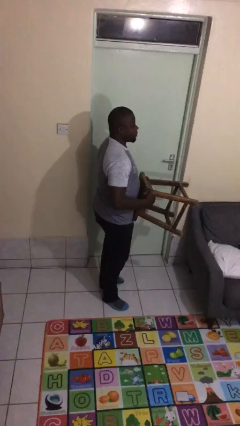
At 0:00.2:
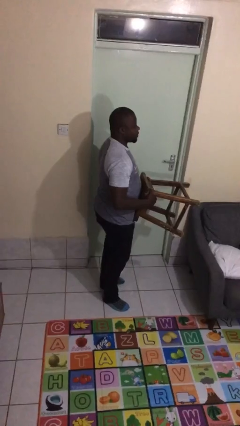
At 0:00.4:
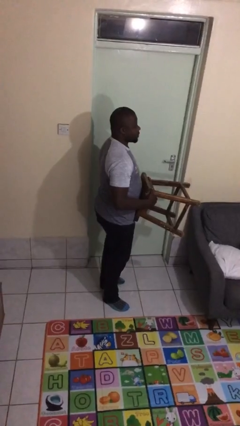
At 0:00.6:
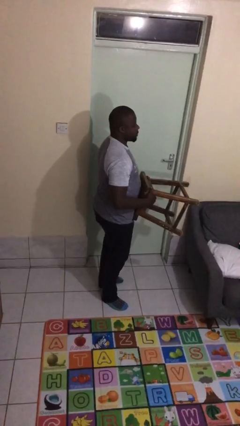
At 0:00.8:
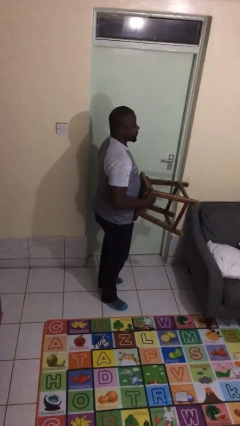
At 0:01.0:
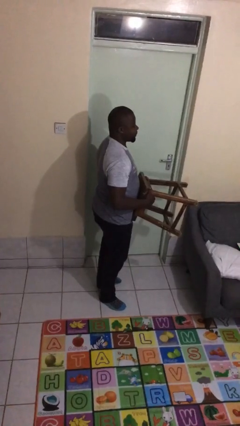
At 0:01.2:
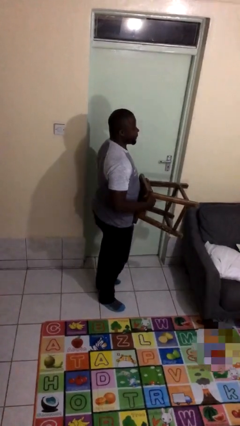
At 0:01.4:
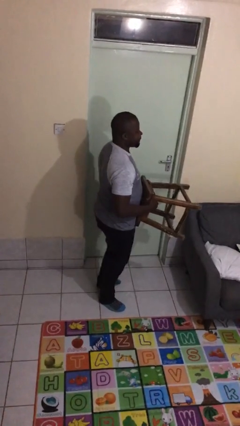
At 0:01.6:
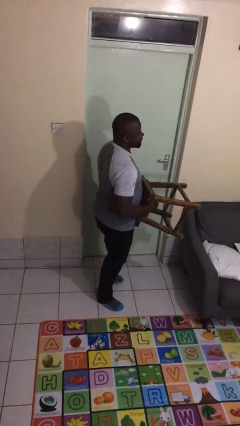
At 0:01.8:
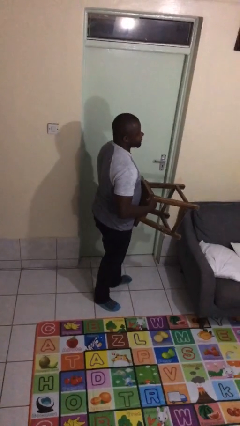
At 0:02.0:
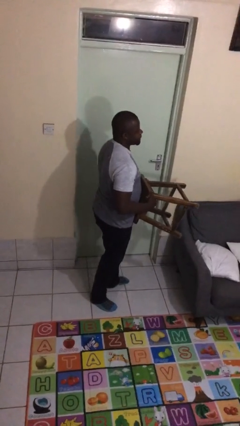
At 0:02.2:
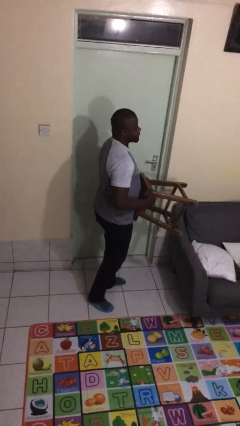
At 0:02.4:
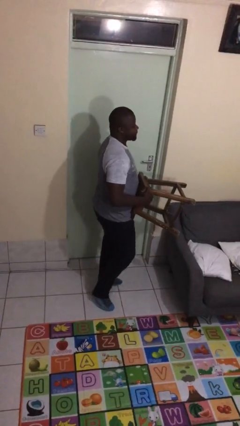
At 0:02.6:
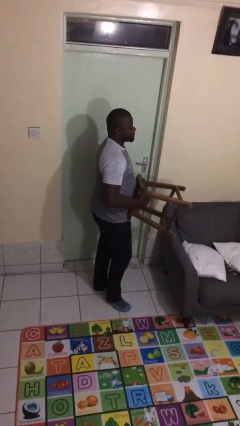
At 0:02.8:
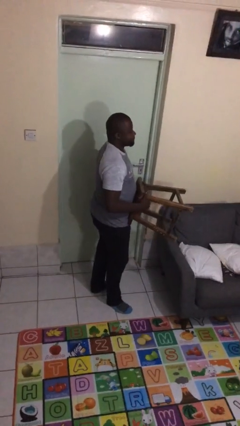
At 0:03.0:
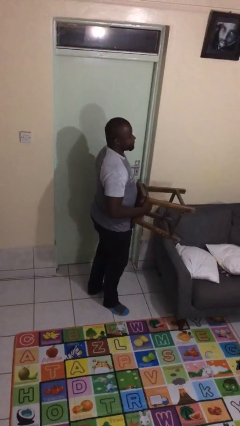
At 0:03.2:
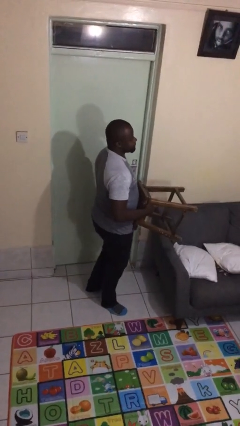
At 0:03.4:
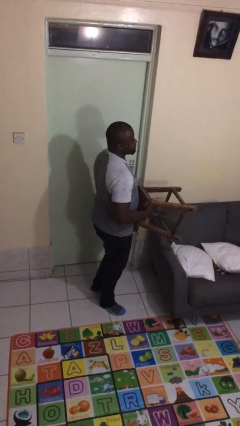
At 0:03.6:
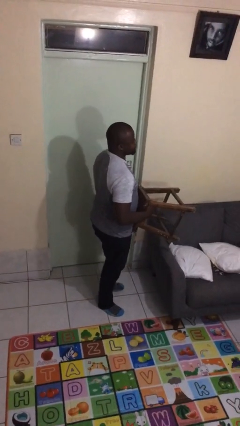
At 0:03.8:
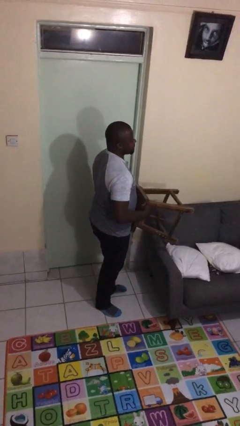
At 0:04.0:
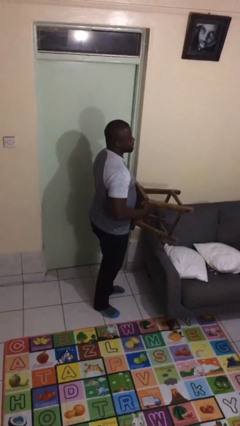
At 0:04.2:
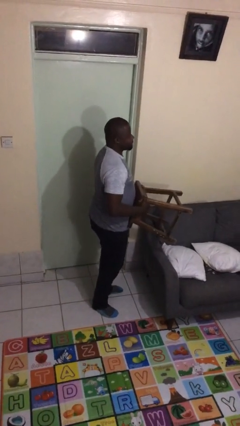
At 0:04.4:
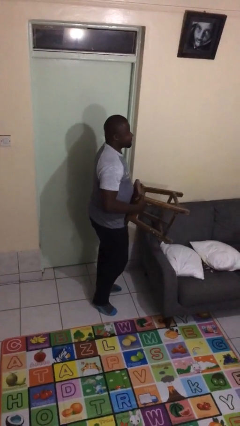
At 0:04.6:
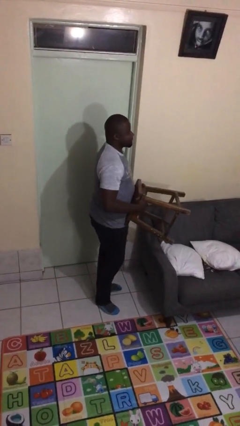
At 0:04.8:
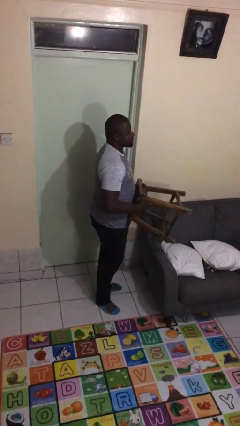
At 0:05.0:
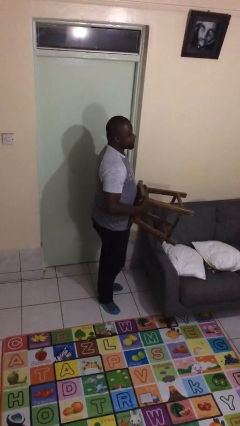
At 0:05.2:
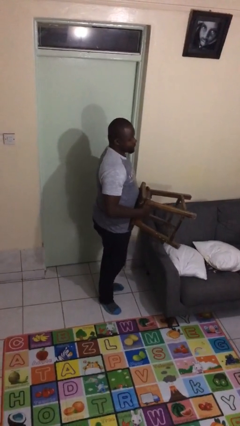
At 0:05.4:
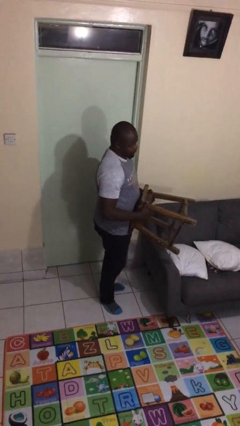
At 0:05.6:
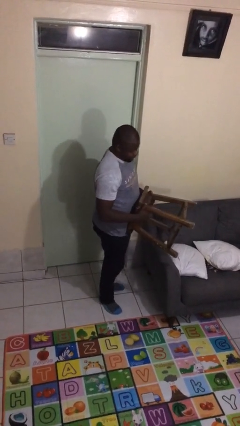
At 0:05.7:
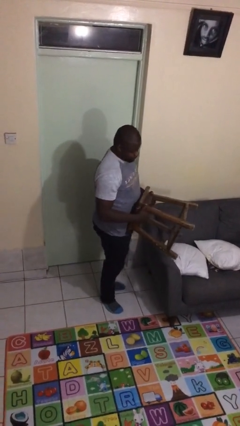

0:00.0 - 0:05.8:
person carries furniture

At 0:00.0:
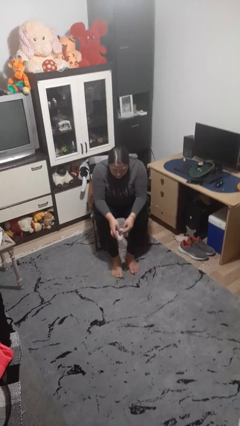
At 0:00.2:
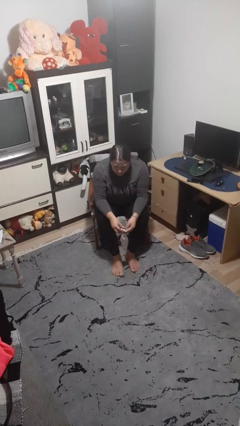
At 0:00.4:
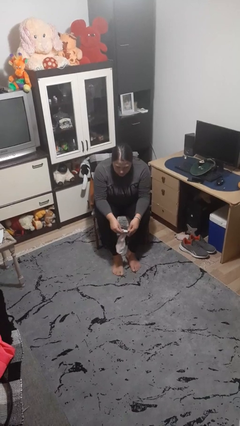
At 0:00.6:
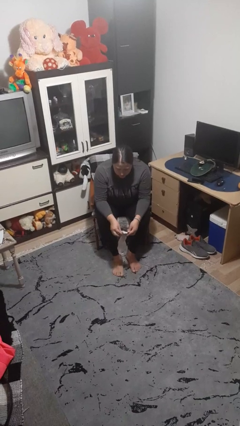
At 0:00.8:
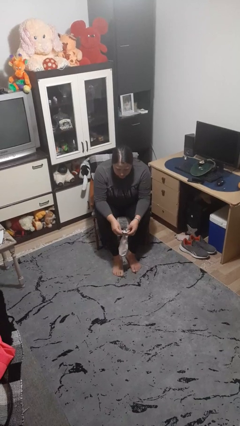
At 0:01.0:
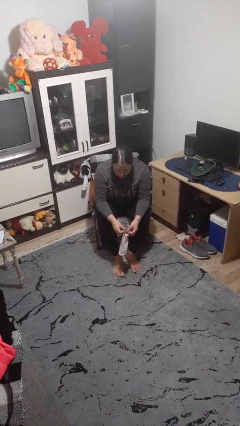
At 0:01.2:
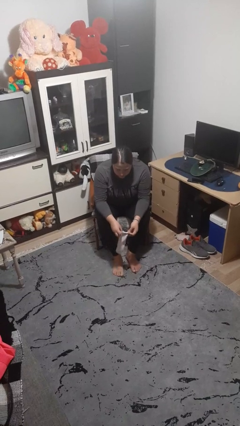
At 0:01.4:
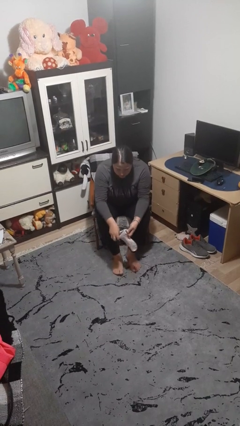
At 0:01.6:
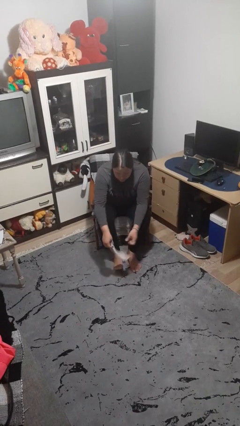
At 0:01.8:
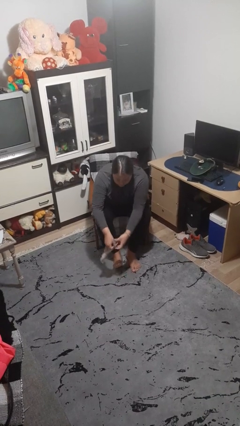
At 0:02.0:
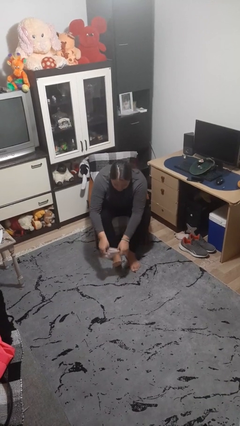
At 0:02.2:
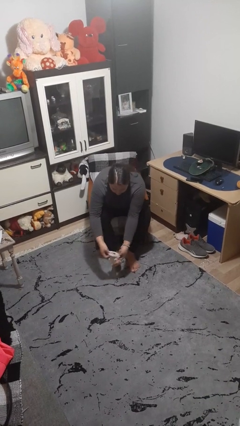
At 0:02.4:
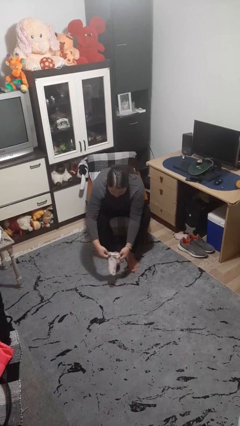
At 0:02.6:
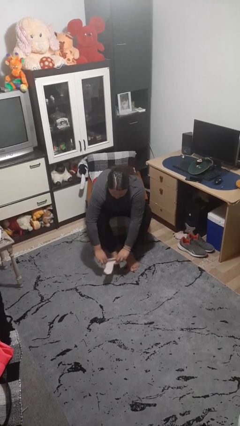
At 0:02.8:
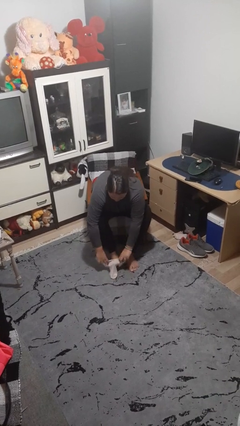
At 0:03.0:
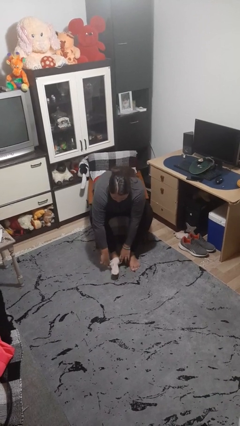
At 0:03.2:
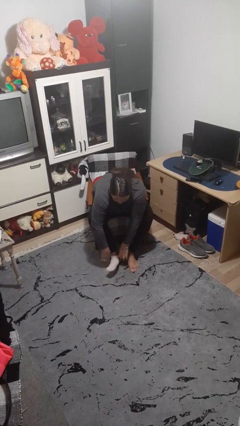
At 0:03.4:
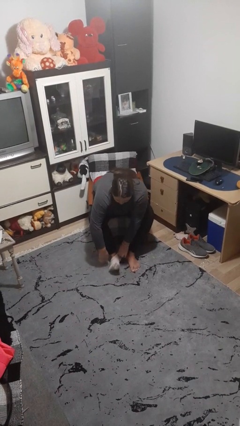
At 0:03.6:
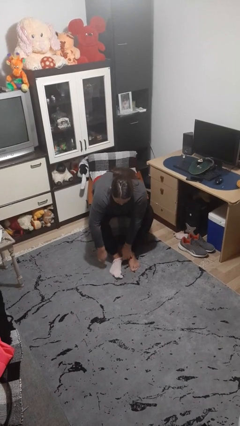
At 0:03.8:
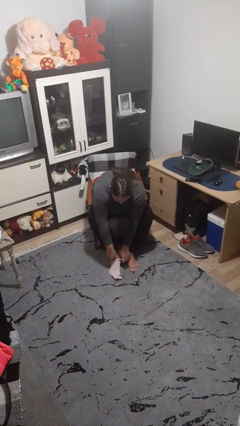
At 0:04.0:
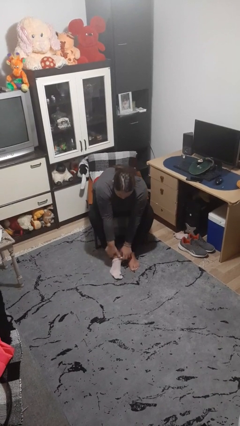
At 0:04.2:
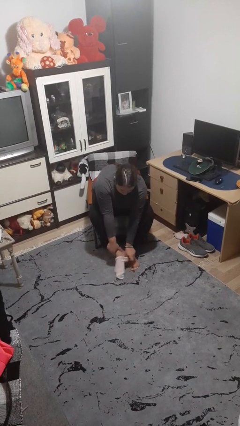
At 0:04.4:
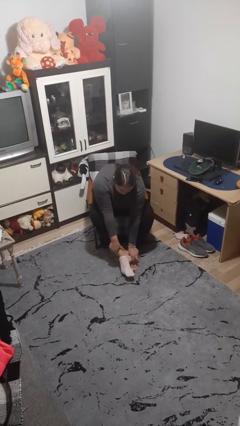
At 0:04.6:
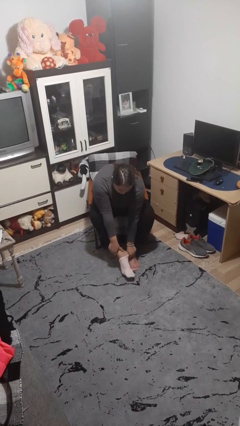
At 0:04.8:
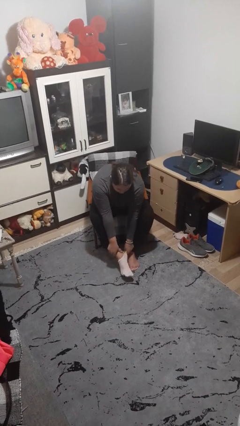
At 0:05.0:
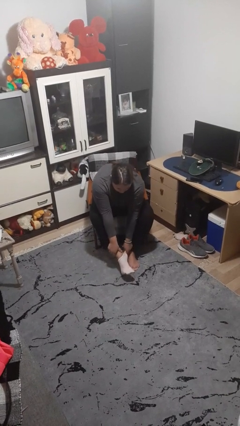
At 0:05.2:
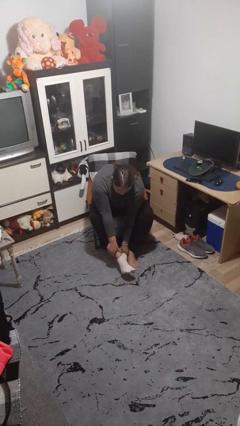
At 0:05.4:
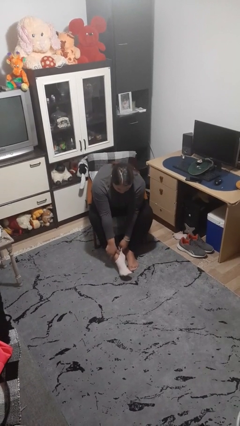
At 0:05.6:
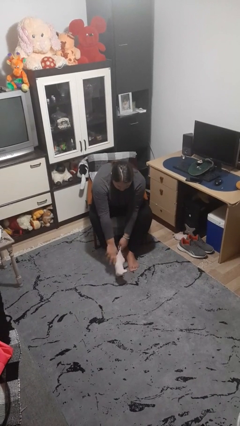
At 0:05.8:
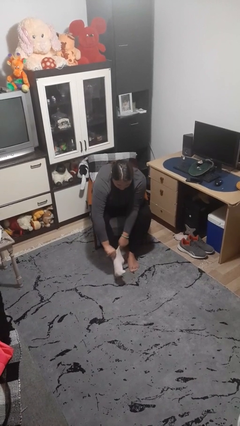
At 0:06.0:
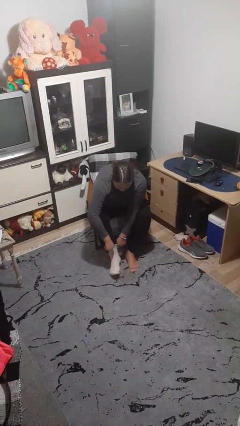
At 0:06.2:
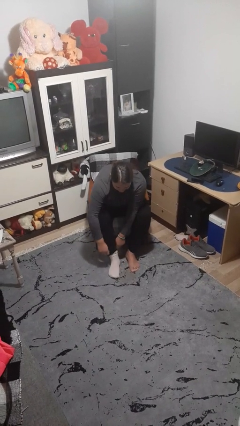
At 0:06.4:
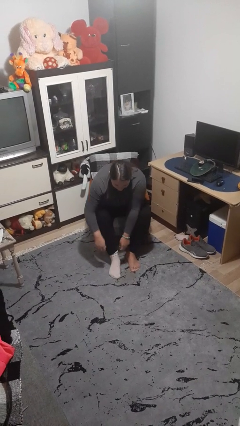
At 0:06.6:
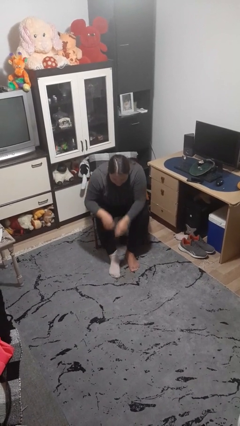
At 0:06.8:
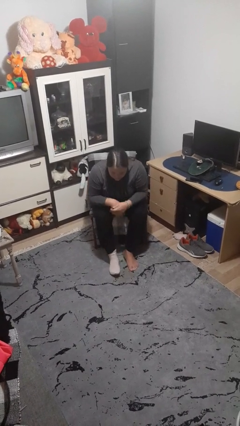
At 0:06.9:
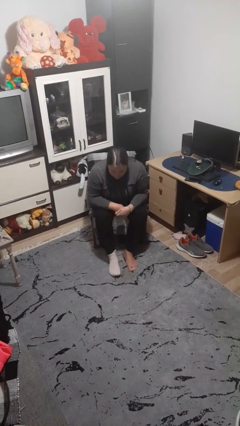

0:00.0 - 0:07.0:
person puts on socks

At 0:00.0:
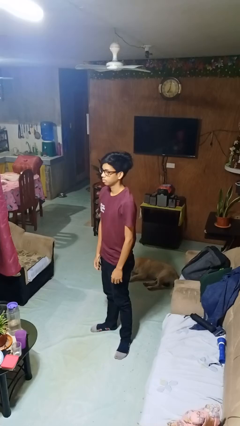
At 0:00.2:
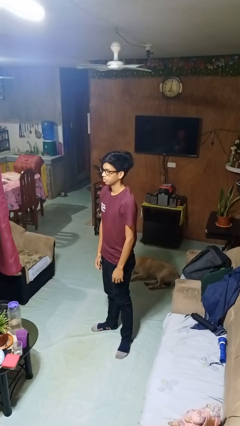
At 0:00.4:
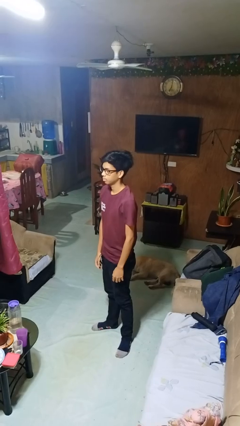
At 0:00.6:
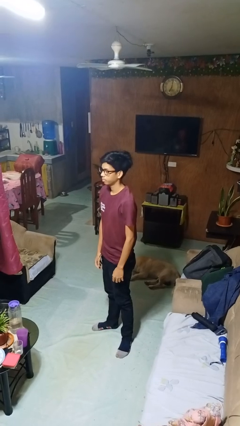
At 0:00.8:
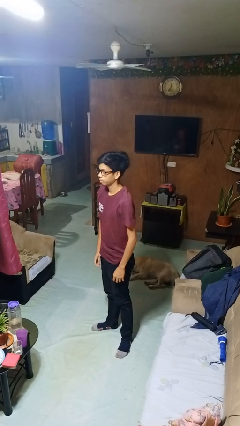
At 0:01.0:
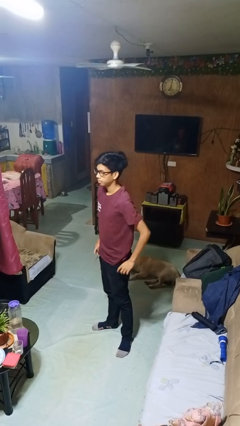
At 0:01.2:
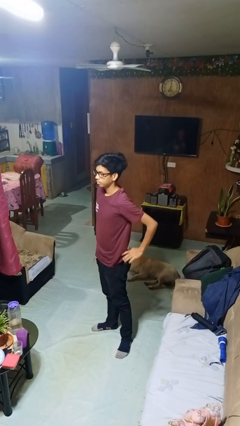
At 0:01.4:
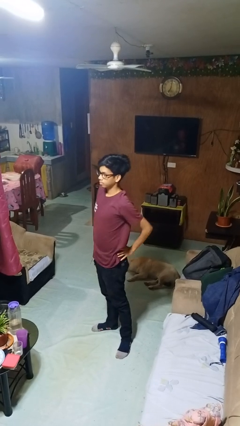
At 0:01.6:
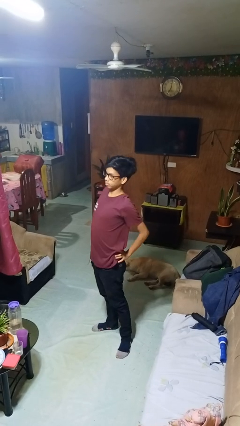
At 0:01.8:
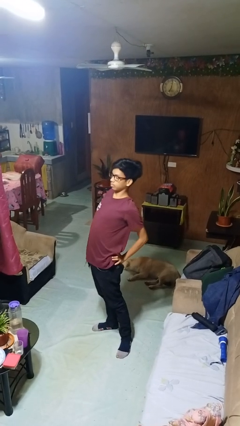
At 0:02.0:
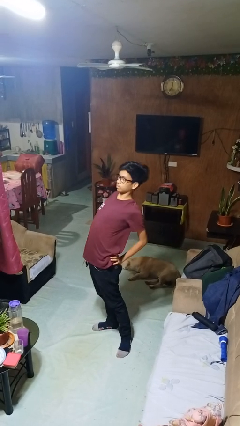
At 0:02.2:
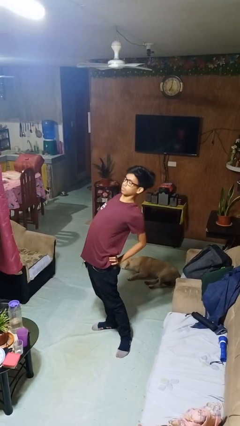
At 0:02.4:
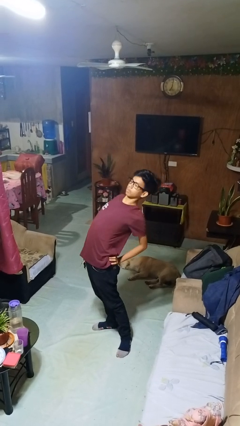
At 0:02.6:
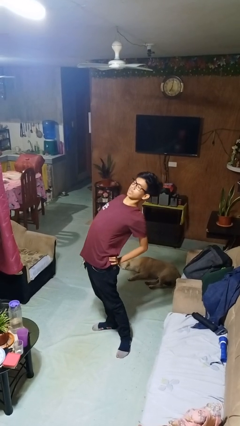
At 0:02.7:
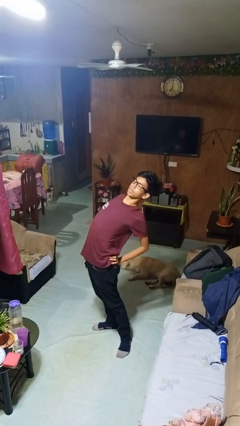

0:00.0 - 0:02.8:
person stretches back

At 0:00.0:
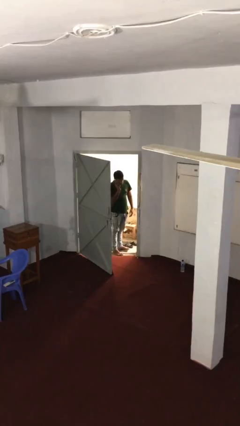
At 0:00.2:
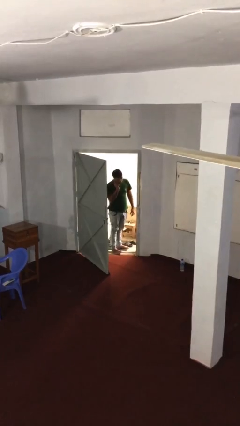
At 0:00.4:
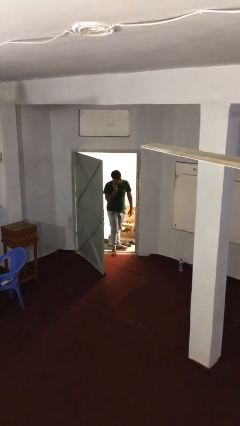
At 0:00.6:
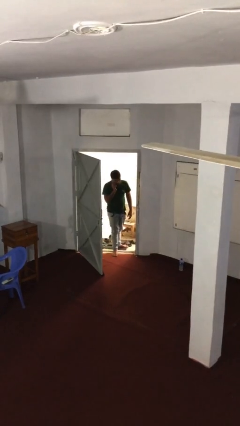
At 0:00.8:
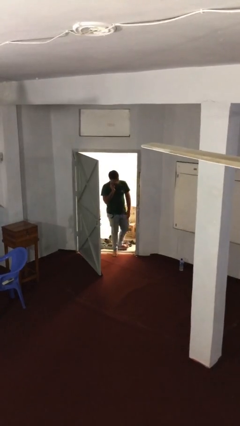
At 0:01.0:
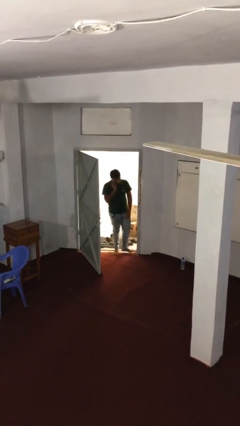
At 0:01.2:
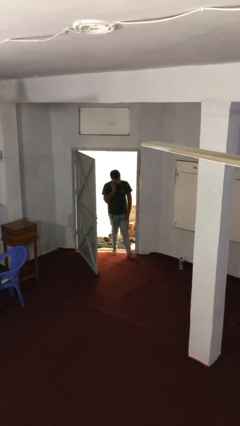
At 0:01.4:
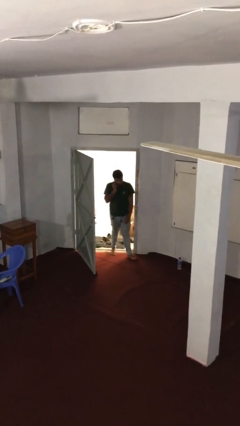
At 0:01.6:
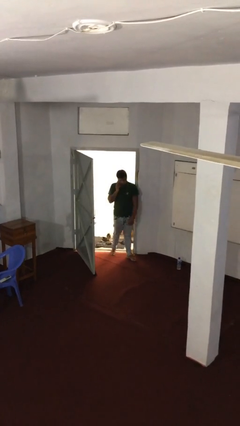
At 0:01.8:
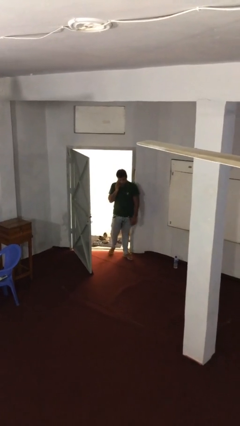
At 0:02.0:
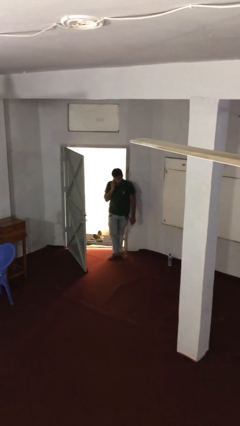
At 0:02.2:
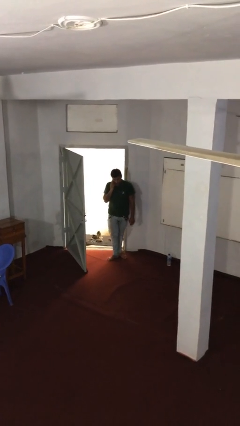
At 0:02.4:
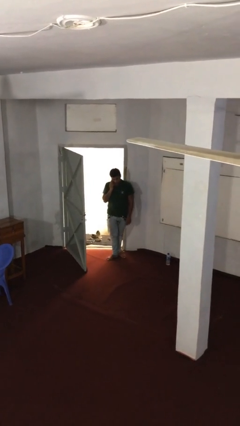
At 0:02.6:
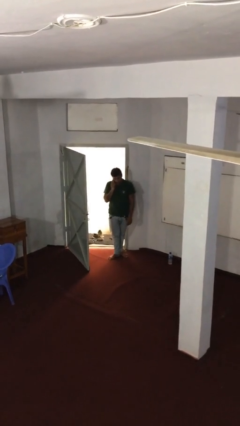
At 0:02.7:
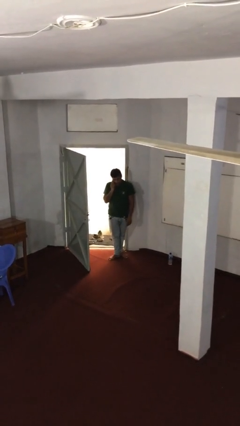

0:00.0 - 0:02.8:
person enters scene through structure
